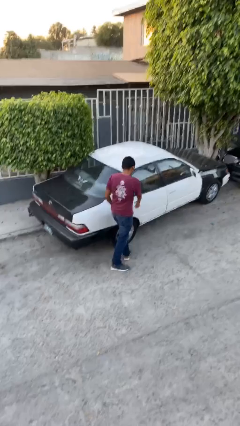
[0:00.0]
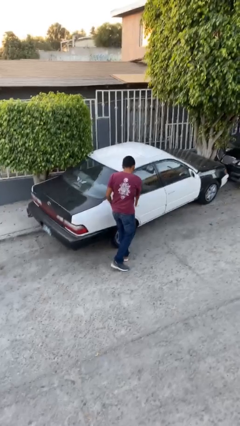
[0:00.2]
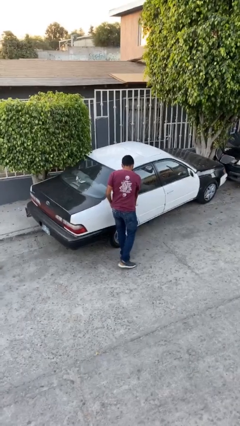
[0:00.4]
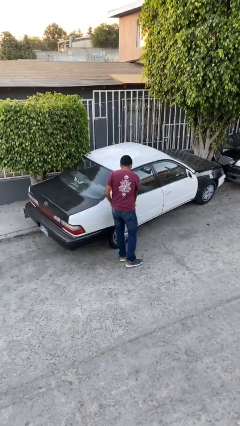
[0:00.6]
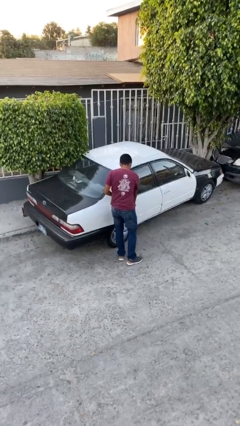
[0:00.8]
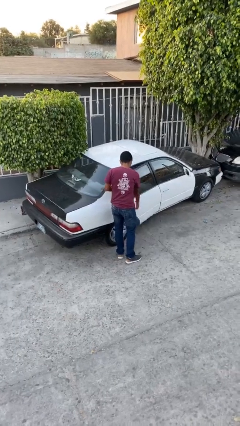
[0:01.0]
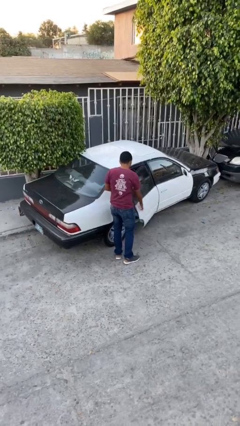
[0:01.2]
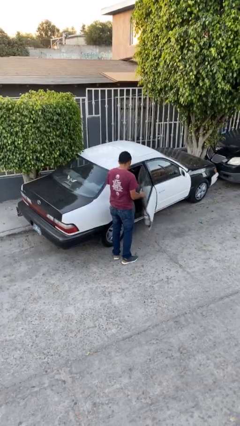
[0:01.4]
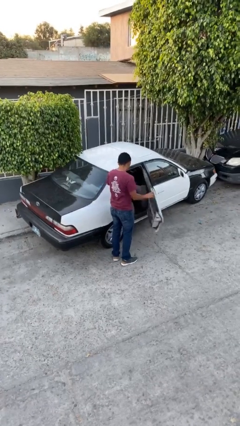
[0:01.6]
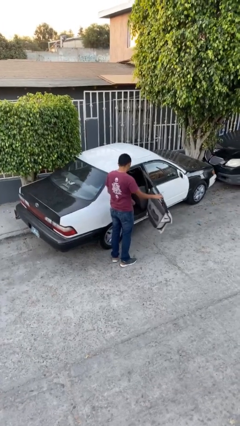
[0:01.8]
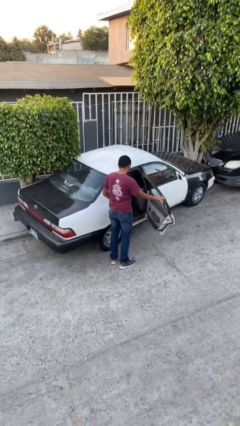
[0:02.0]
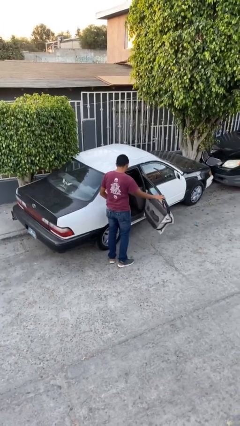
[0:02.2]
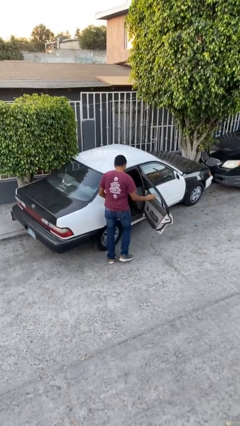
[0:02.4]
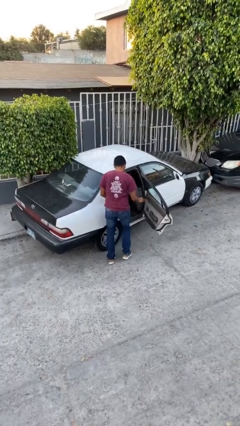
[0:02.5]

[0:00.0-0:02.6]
person opens car door

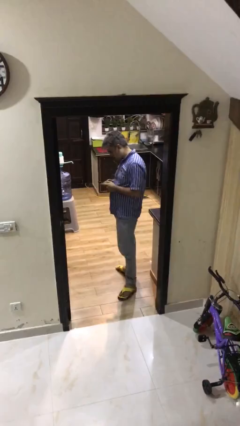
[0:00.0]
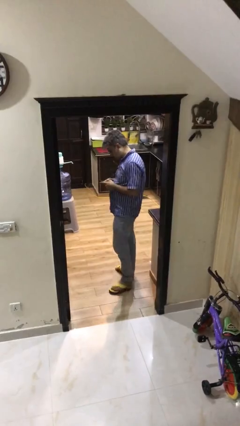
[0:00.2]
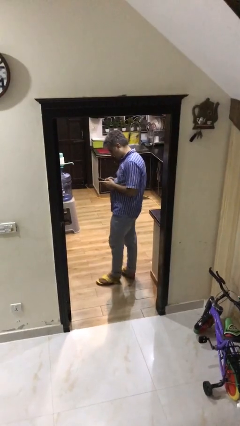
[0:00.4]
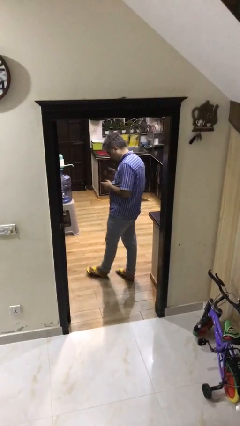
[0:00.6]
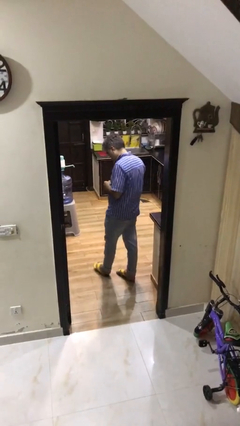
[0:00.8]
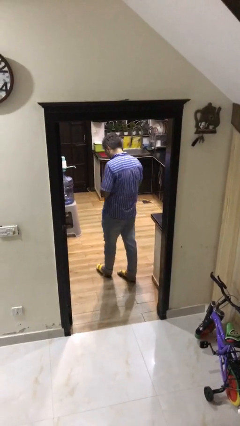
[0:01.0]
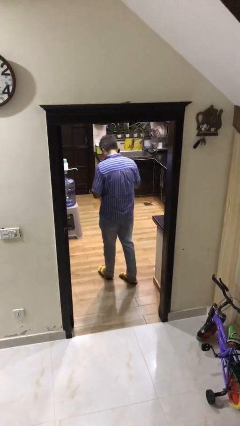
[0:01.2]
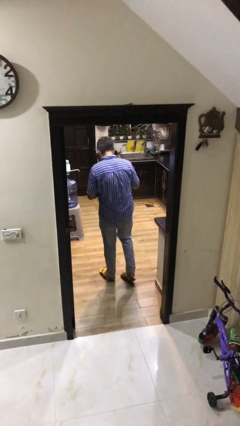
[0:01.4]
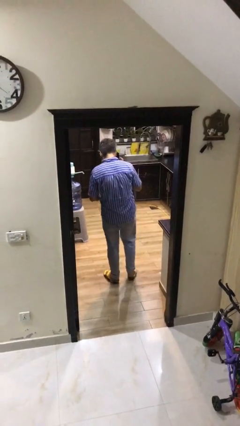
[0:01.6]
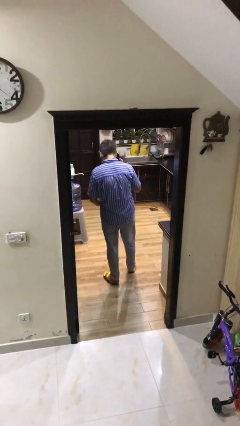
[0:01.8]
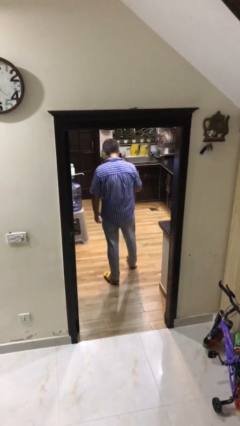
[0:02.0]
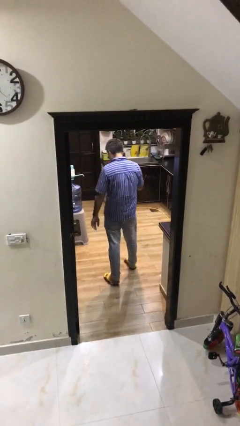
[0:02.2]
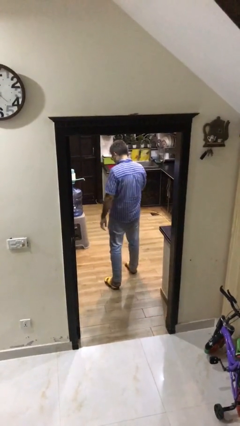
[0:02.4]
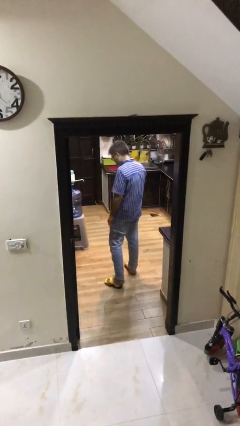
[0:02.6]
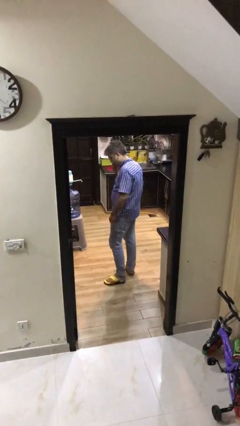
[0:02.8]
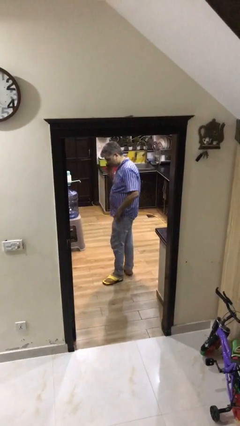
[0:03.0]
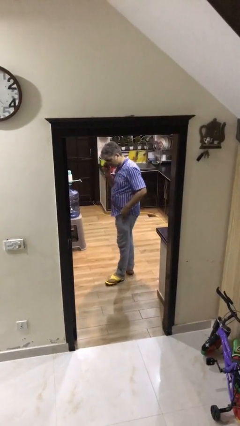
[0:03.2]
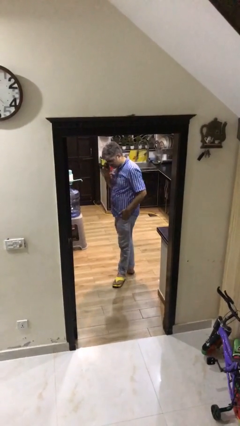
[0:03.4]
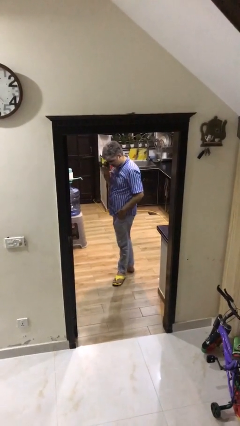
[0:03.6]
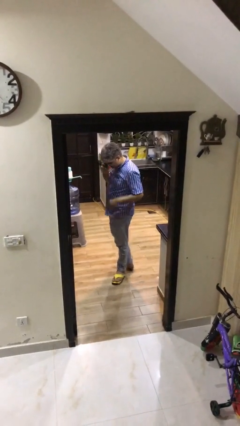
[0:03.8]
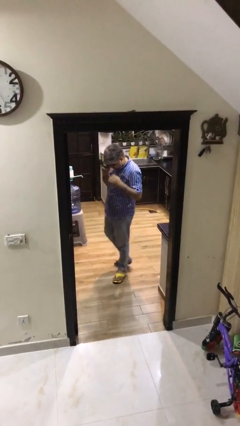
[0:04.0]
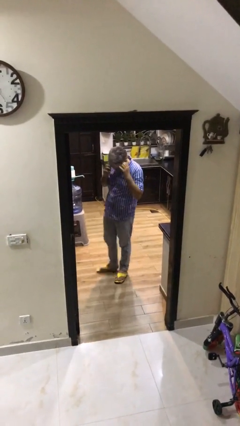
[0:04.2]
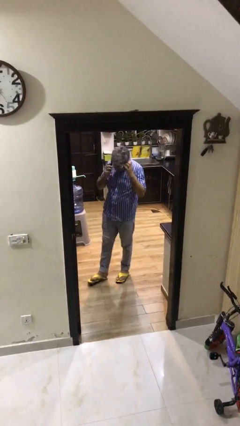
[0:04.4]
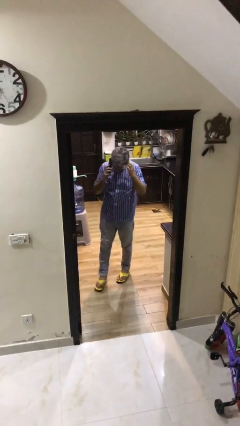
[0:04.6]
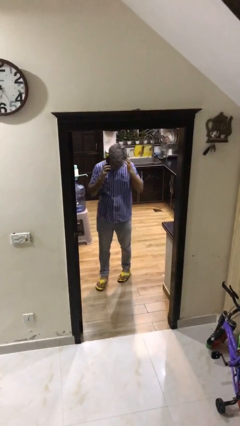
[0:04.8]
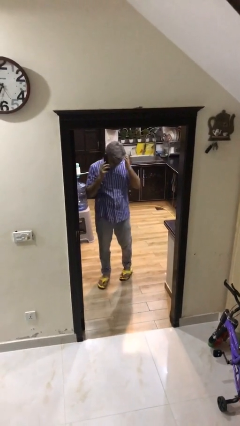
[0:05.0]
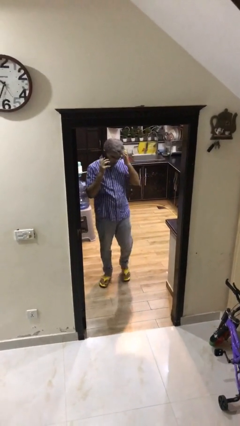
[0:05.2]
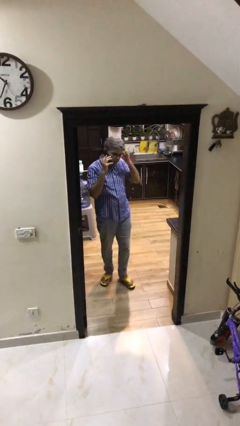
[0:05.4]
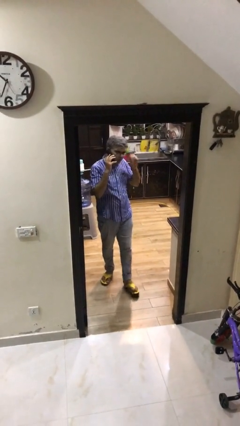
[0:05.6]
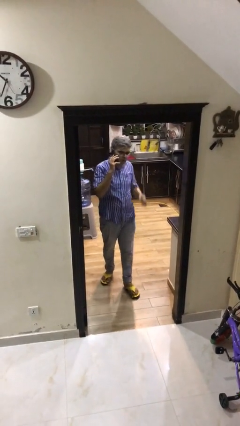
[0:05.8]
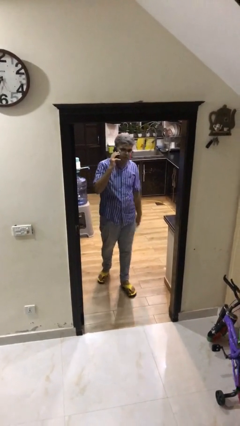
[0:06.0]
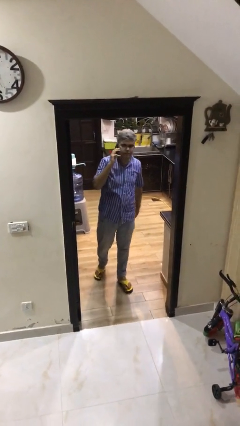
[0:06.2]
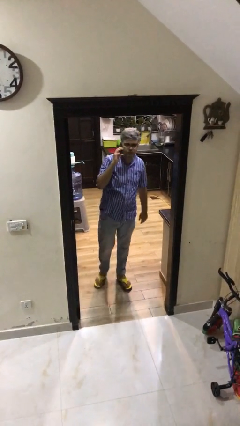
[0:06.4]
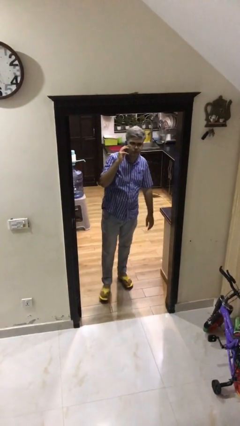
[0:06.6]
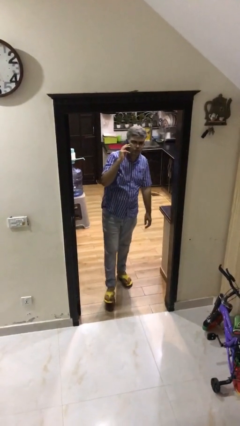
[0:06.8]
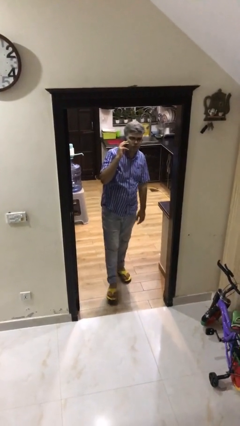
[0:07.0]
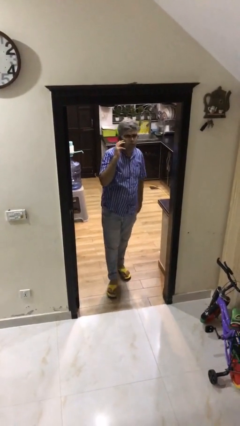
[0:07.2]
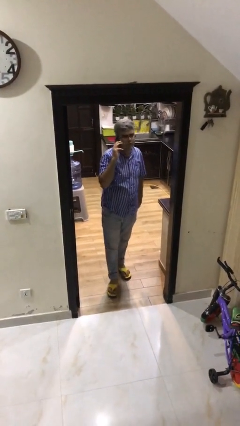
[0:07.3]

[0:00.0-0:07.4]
person talks on phone

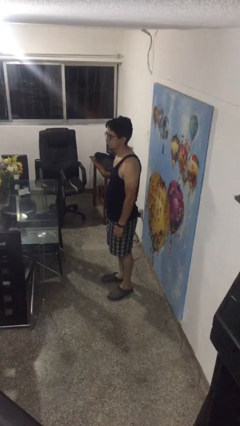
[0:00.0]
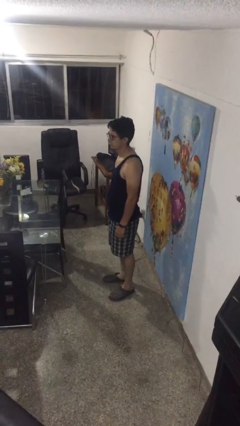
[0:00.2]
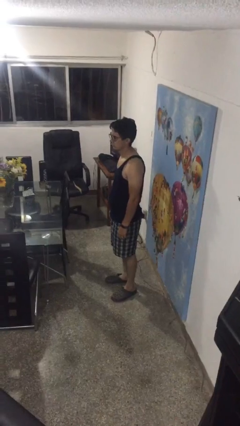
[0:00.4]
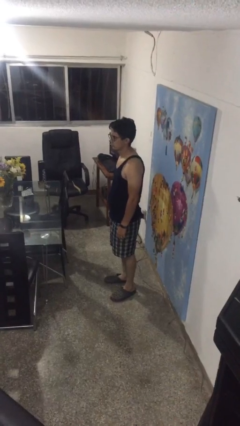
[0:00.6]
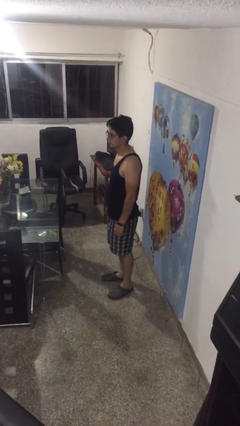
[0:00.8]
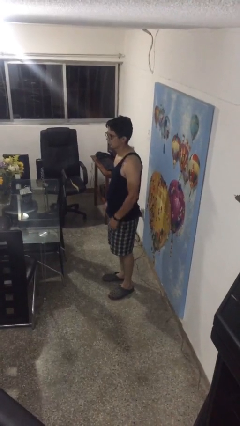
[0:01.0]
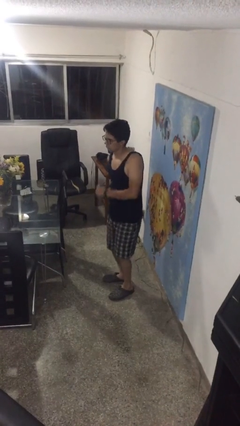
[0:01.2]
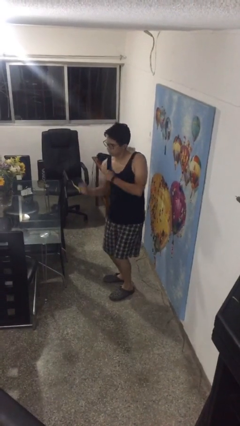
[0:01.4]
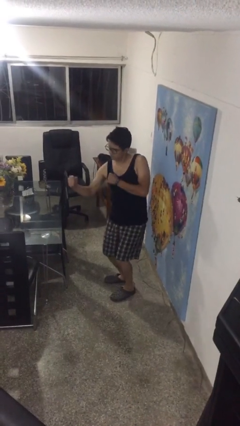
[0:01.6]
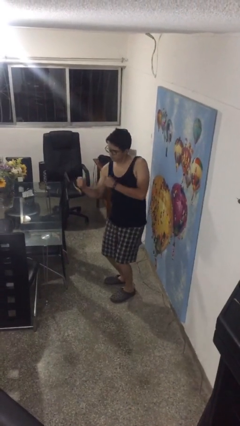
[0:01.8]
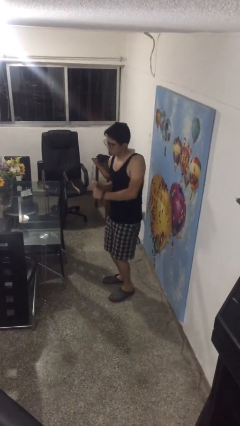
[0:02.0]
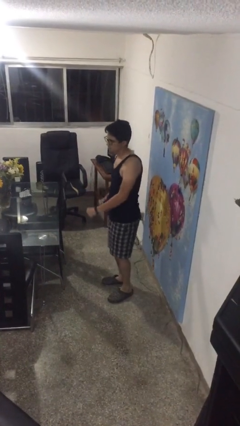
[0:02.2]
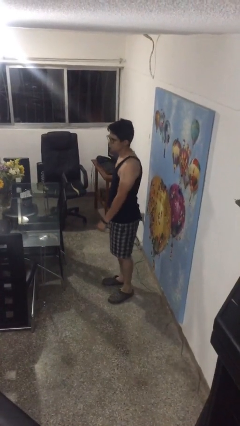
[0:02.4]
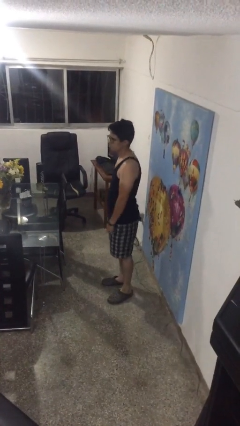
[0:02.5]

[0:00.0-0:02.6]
person punches

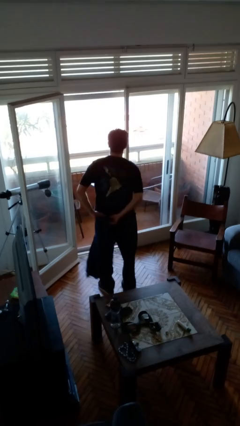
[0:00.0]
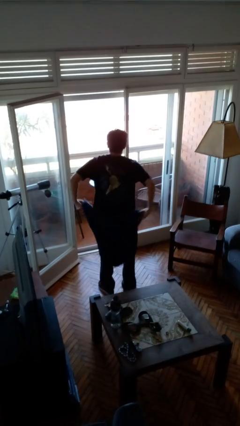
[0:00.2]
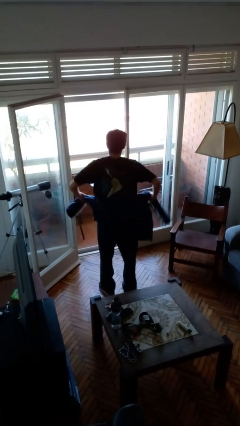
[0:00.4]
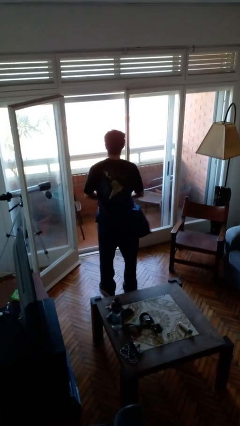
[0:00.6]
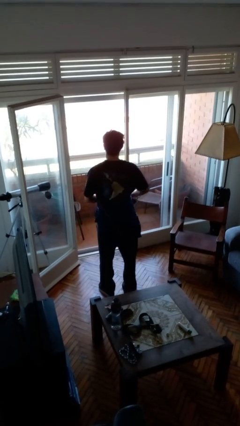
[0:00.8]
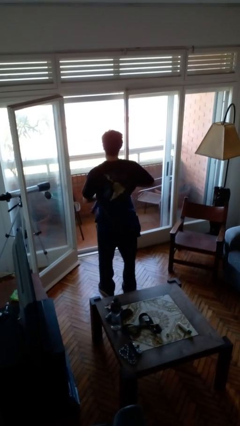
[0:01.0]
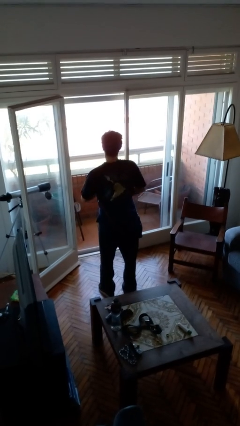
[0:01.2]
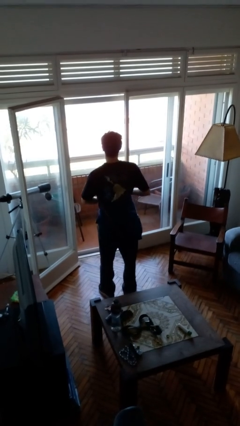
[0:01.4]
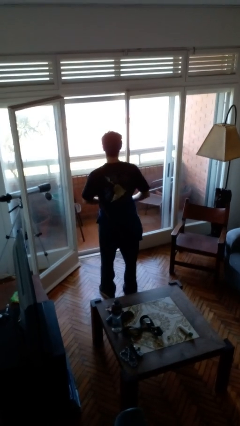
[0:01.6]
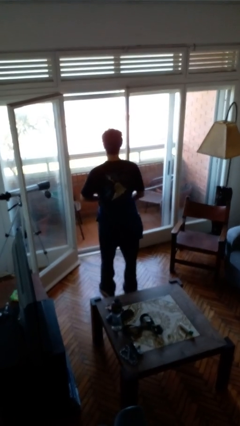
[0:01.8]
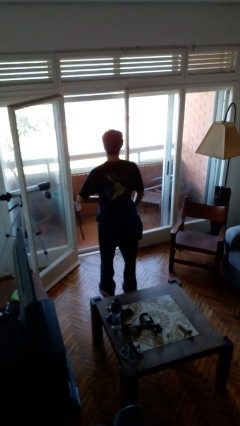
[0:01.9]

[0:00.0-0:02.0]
person ties jacket around waist

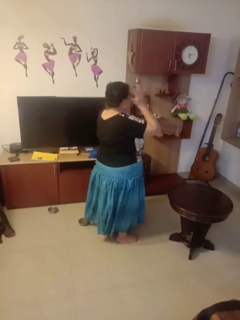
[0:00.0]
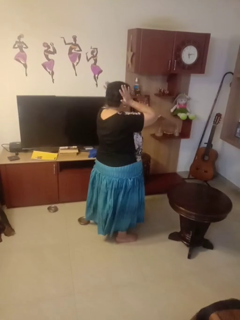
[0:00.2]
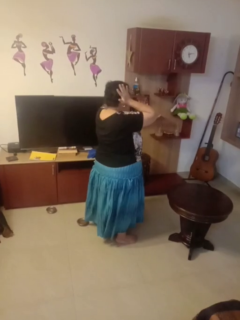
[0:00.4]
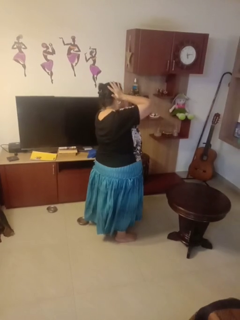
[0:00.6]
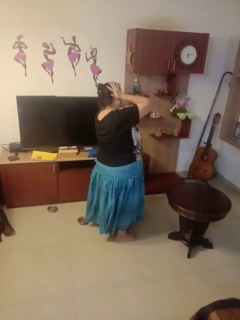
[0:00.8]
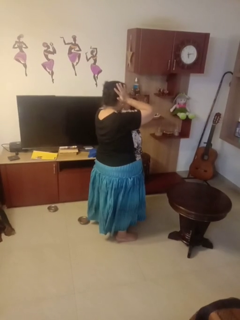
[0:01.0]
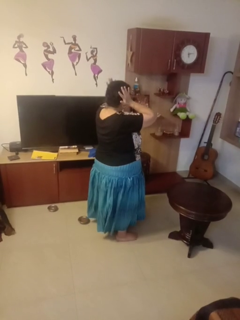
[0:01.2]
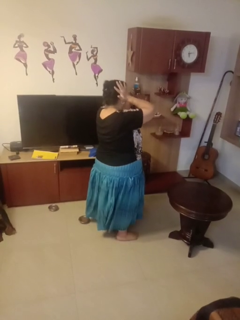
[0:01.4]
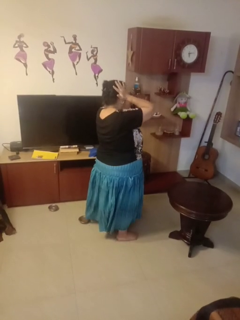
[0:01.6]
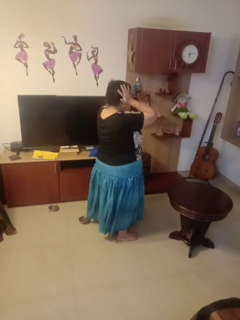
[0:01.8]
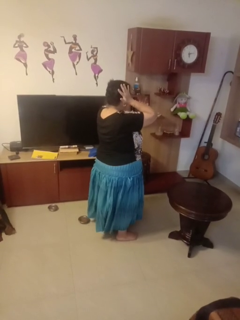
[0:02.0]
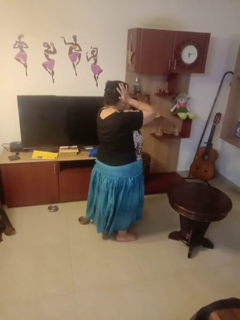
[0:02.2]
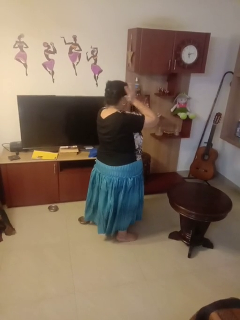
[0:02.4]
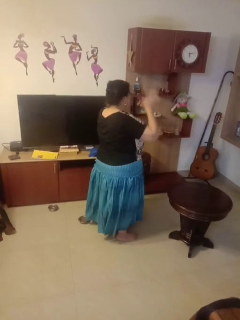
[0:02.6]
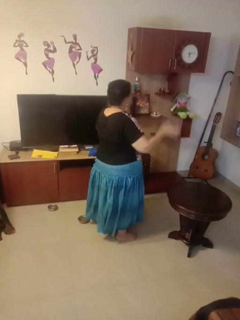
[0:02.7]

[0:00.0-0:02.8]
person puts fingers in ear
